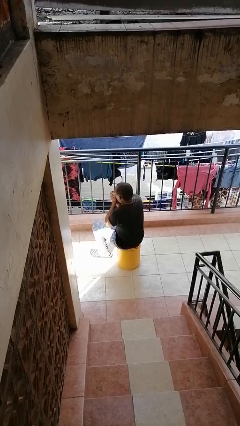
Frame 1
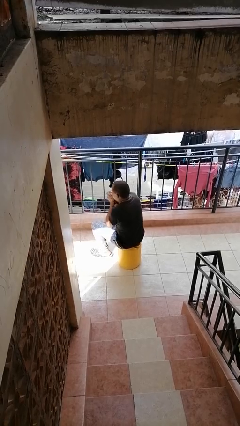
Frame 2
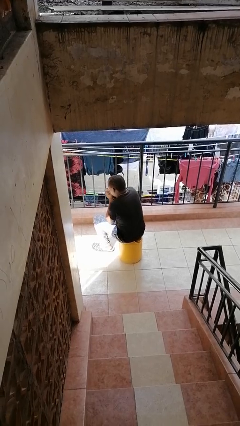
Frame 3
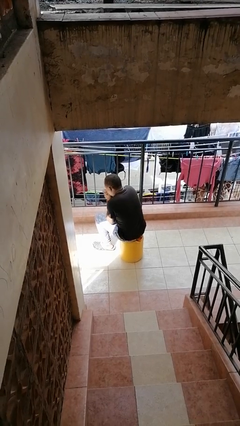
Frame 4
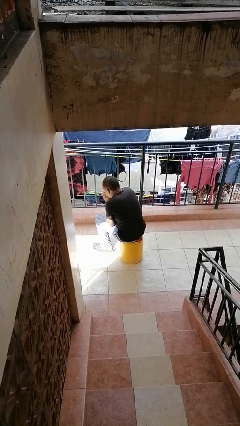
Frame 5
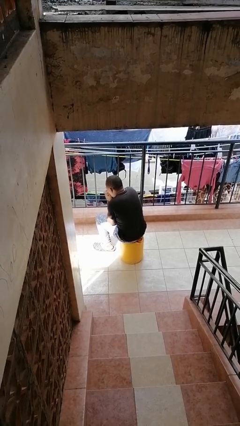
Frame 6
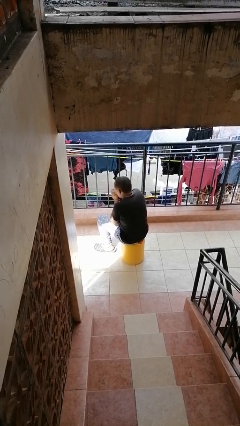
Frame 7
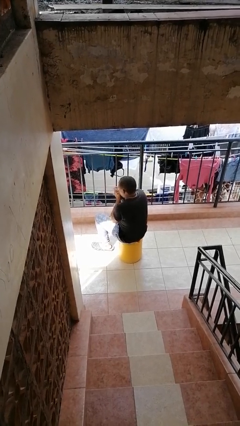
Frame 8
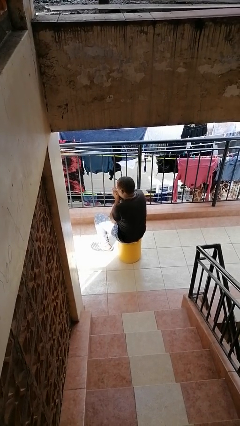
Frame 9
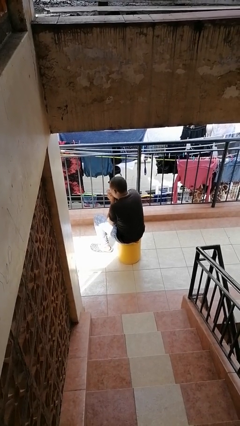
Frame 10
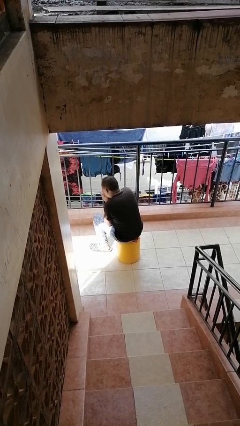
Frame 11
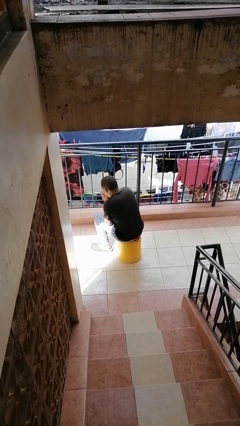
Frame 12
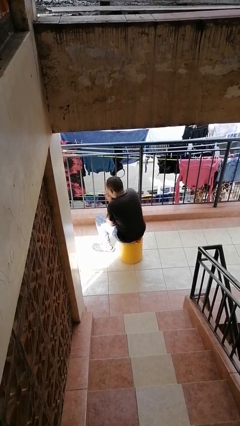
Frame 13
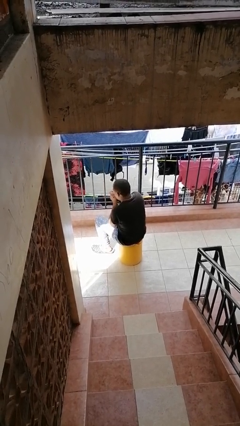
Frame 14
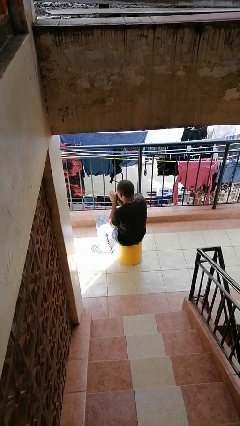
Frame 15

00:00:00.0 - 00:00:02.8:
person blows into hands

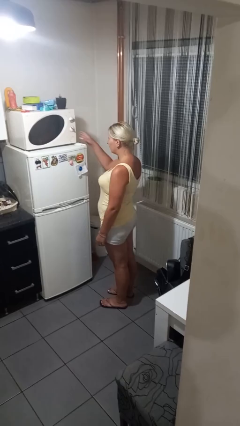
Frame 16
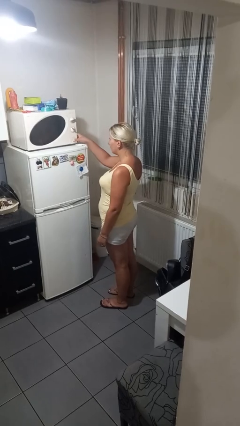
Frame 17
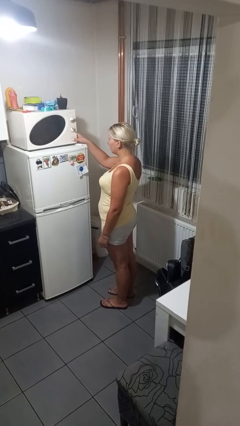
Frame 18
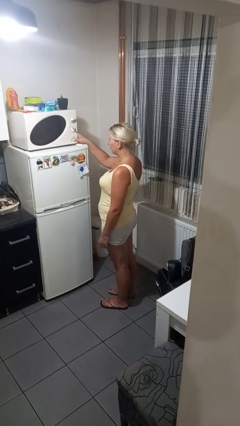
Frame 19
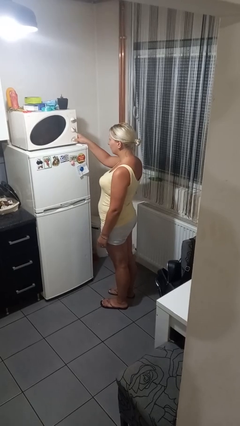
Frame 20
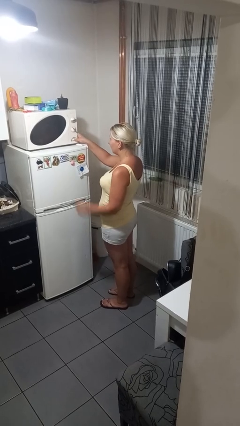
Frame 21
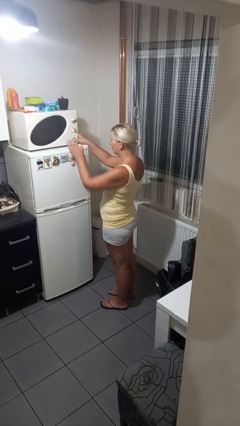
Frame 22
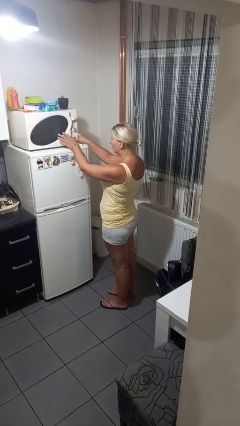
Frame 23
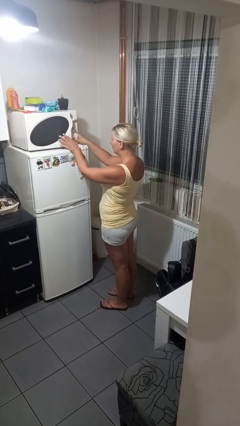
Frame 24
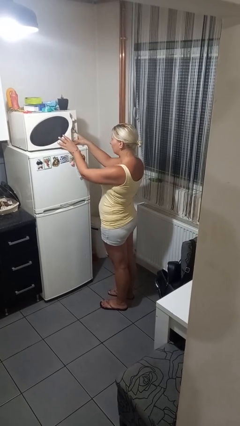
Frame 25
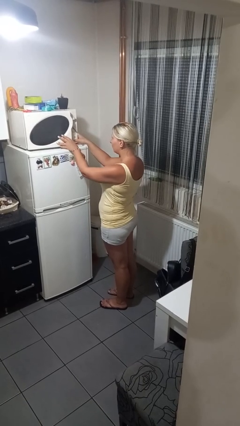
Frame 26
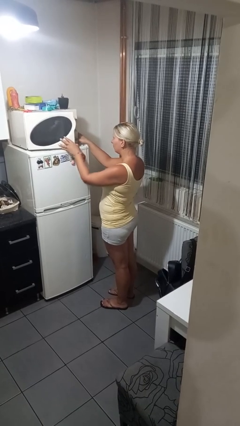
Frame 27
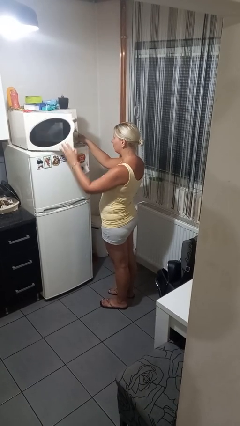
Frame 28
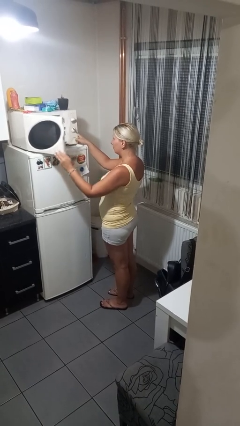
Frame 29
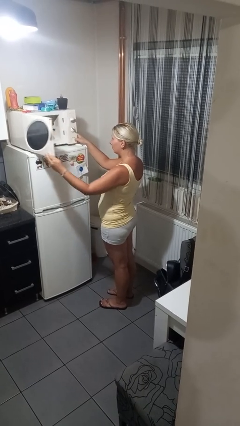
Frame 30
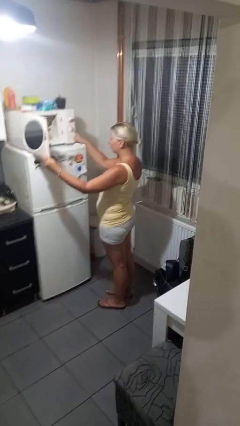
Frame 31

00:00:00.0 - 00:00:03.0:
person opens microwave

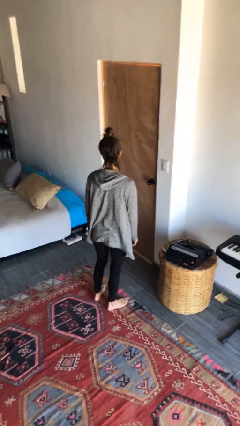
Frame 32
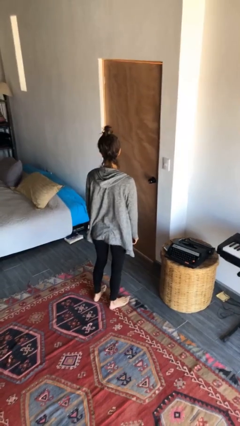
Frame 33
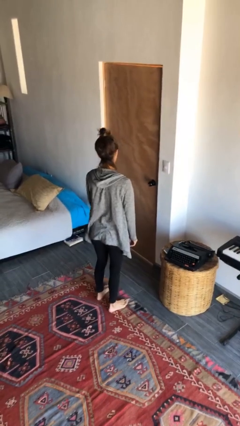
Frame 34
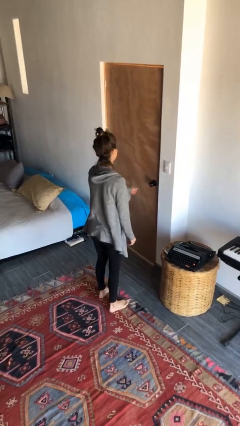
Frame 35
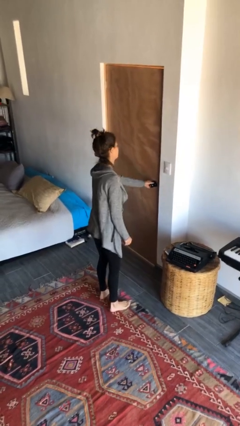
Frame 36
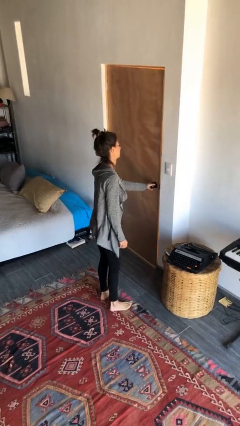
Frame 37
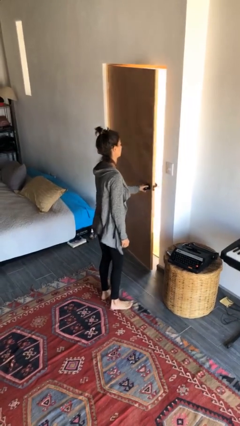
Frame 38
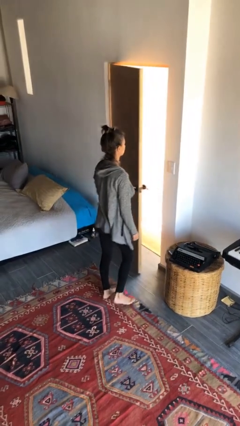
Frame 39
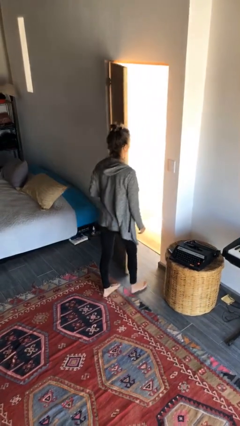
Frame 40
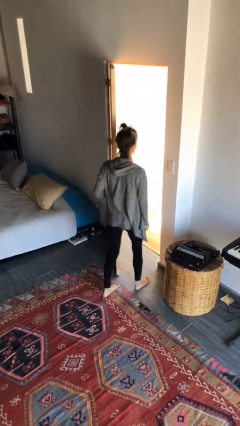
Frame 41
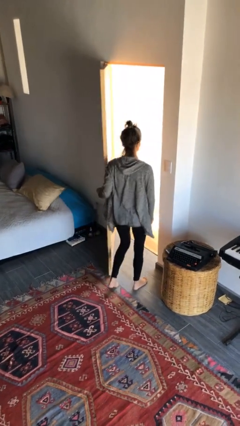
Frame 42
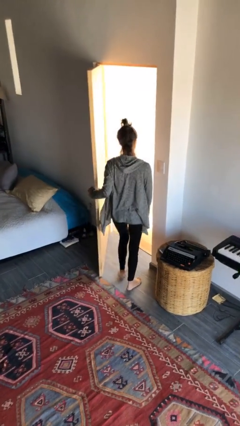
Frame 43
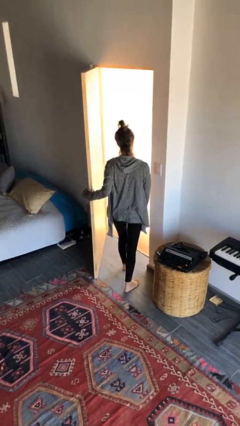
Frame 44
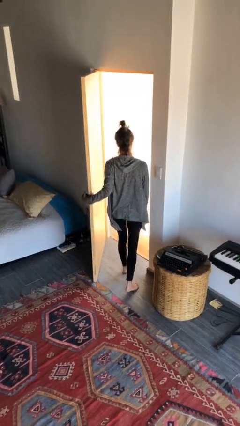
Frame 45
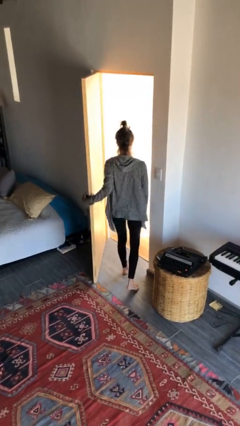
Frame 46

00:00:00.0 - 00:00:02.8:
person opens facility door

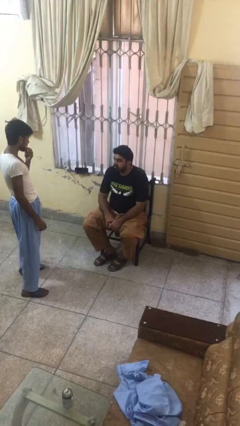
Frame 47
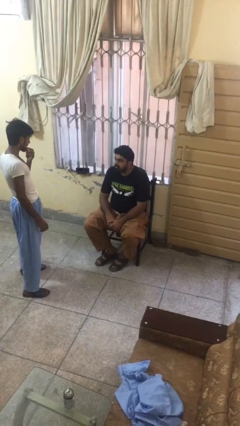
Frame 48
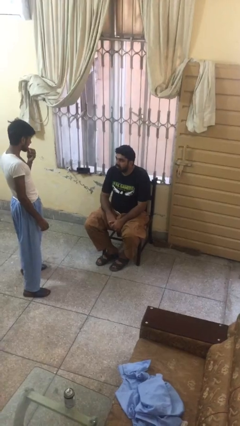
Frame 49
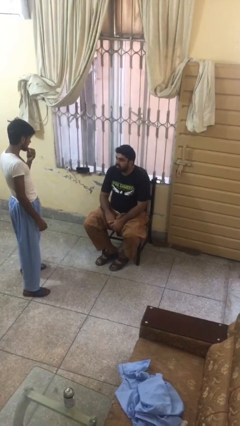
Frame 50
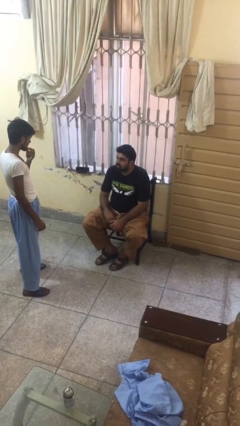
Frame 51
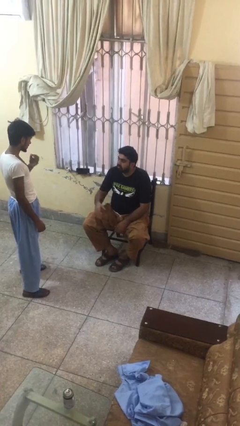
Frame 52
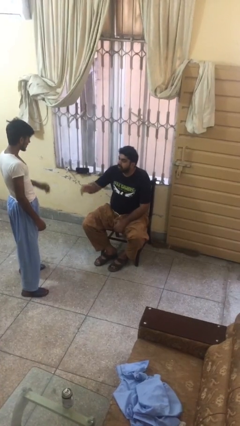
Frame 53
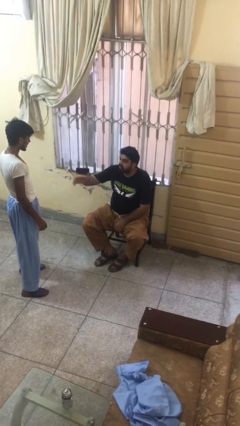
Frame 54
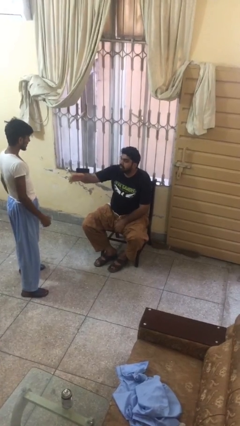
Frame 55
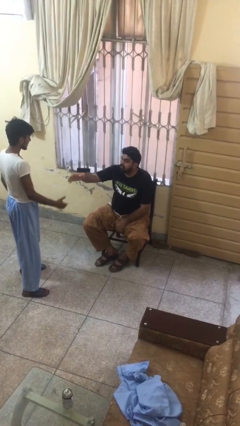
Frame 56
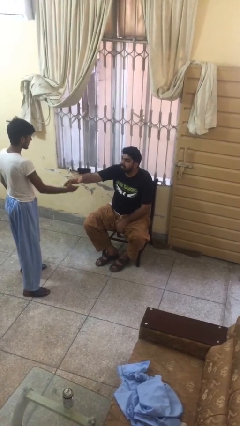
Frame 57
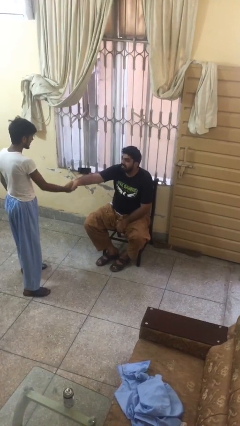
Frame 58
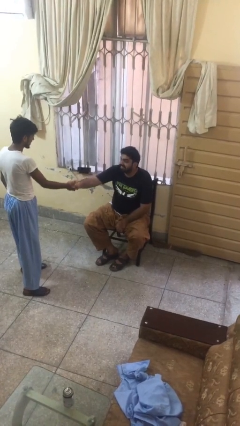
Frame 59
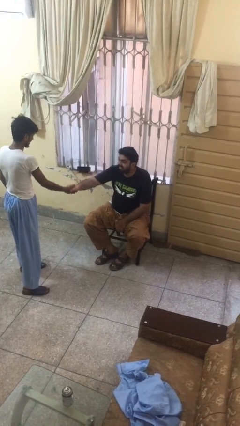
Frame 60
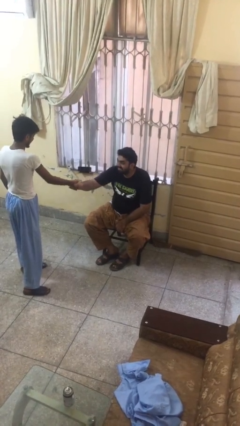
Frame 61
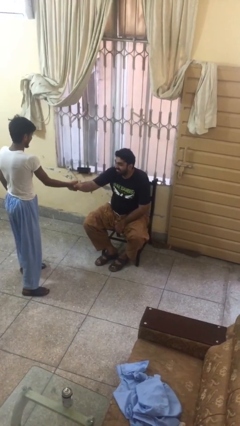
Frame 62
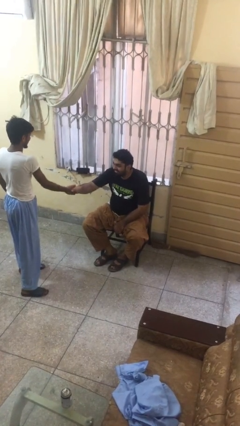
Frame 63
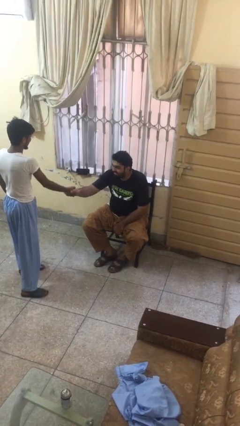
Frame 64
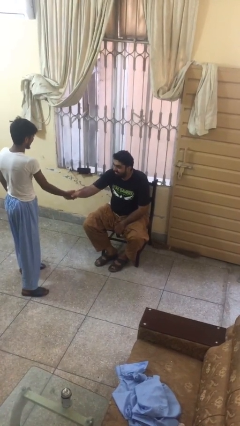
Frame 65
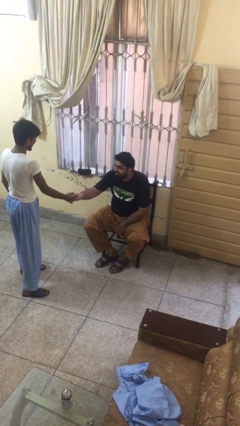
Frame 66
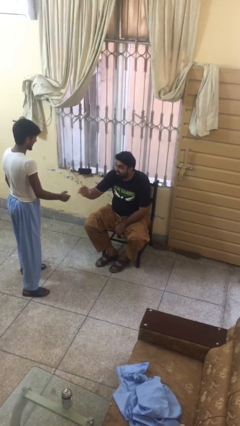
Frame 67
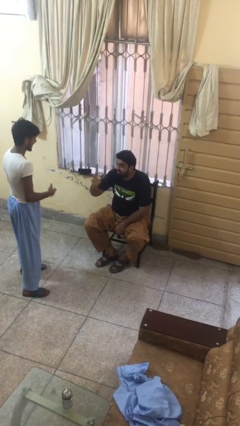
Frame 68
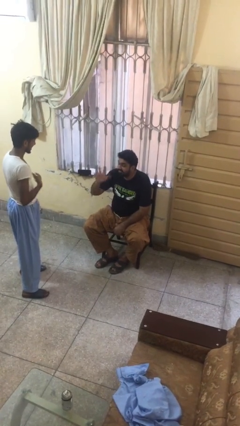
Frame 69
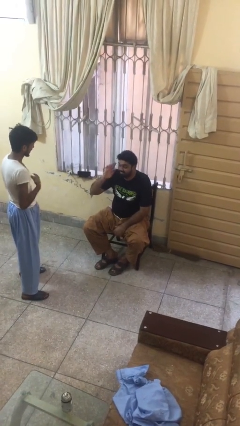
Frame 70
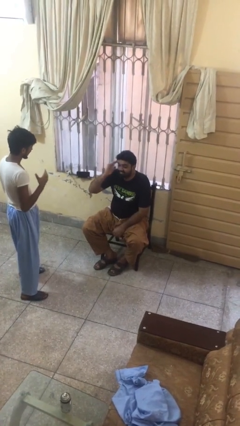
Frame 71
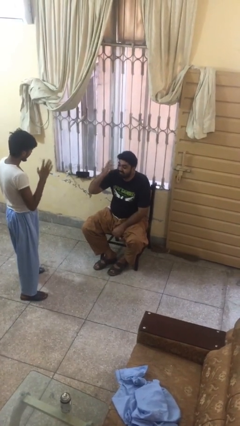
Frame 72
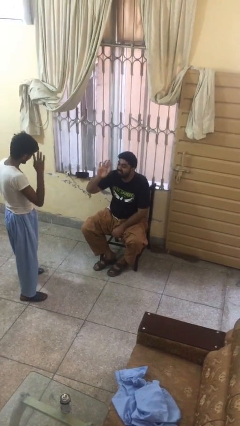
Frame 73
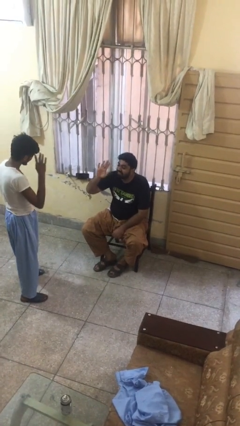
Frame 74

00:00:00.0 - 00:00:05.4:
person shakes hand

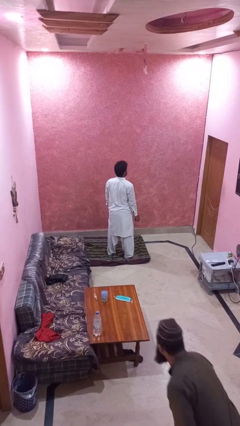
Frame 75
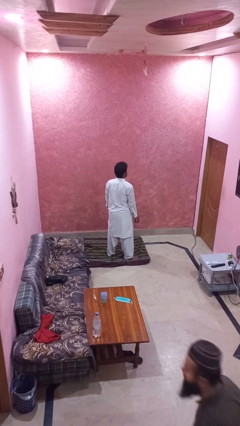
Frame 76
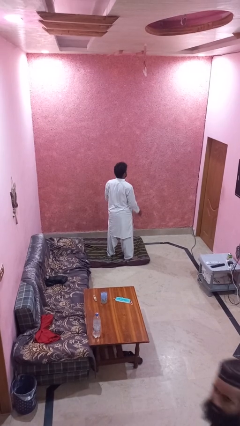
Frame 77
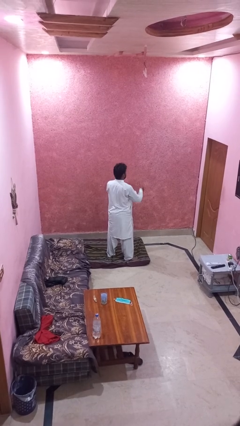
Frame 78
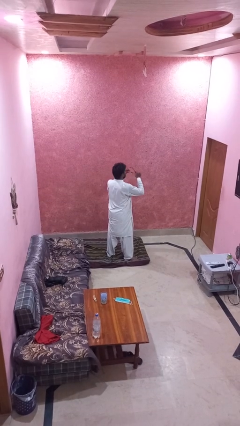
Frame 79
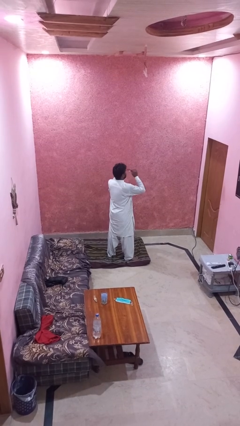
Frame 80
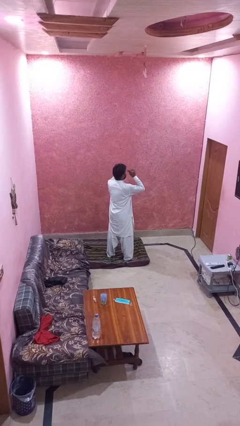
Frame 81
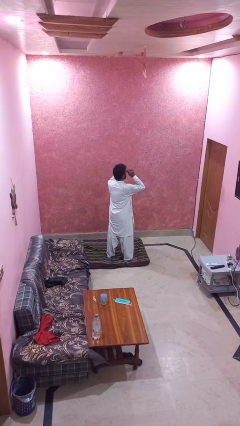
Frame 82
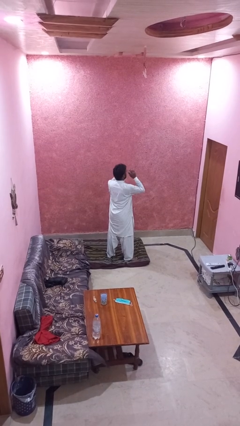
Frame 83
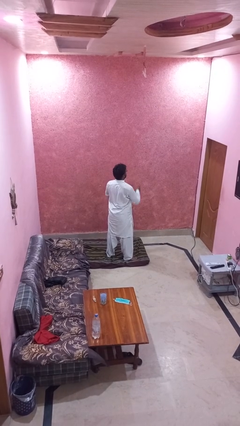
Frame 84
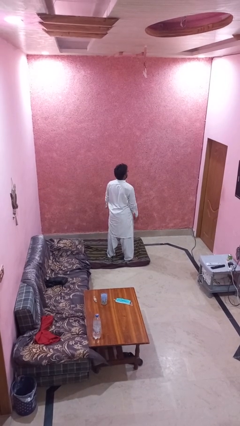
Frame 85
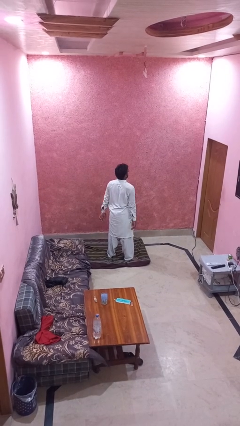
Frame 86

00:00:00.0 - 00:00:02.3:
person puts on glasses

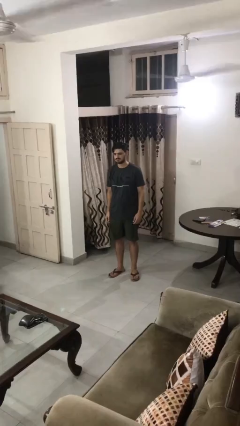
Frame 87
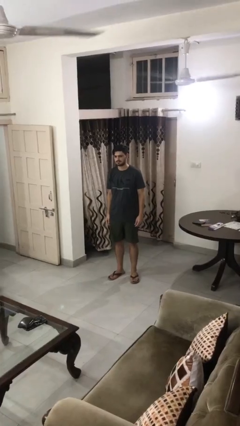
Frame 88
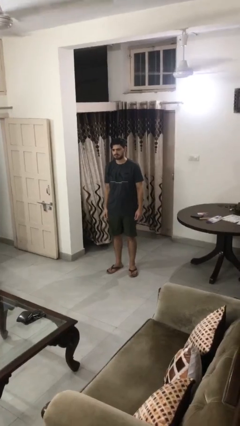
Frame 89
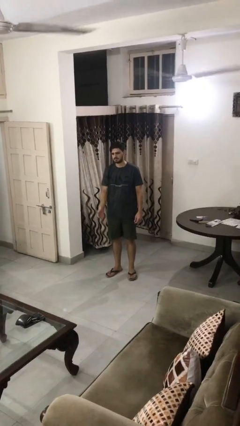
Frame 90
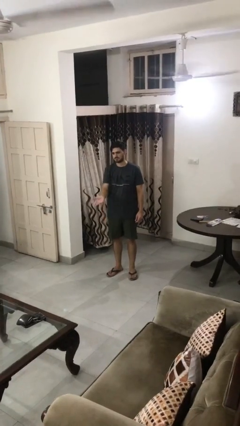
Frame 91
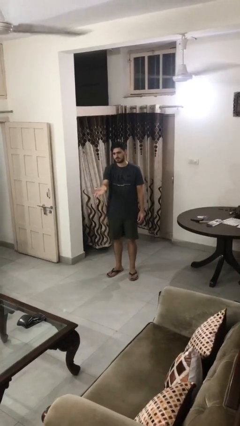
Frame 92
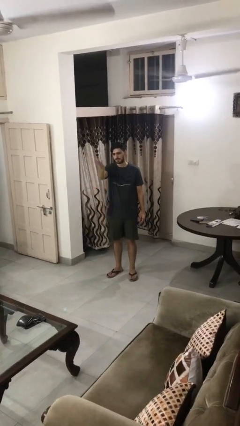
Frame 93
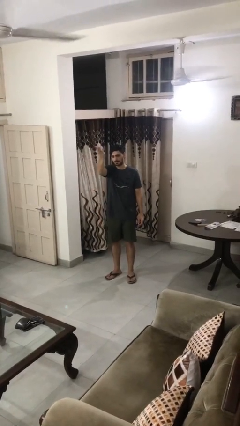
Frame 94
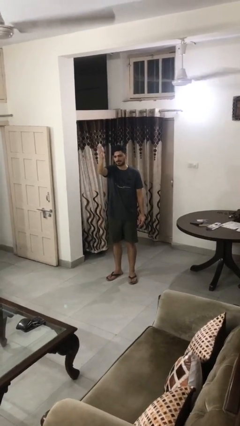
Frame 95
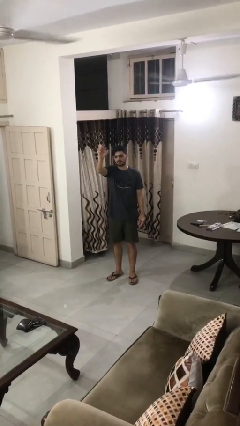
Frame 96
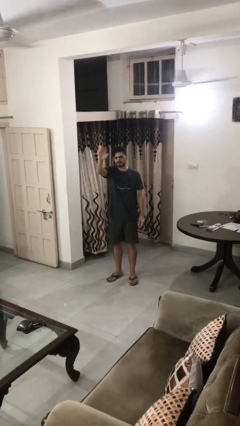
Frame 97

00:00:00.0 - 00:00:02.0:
person gestures swipe up
